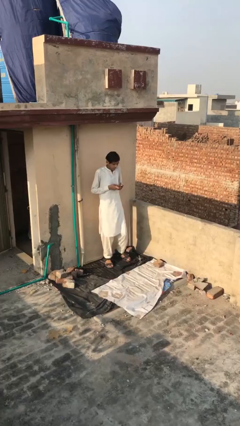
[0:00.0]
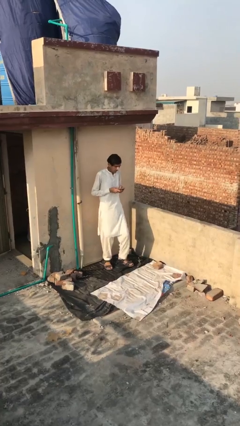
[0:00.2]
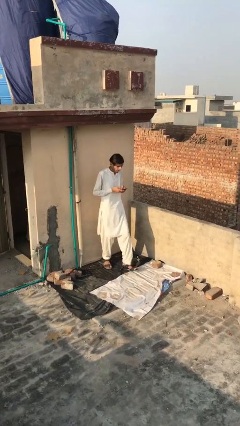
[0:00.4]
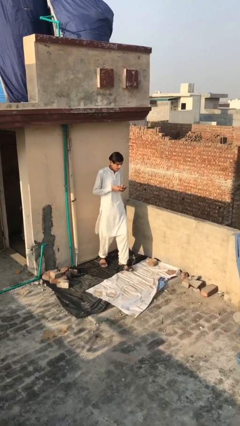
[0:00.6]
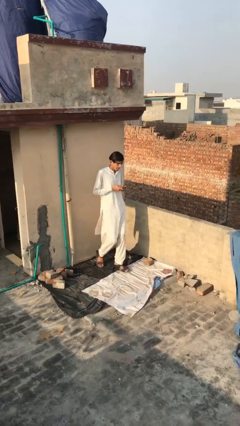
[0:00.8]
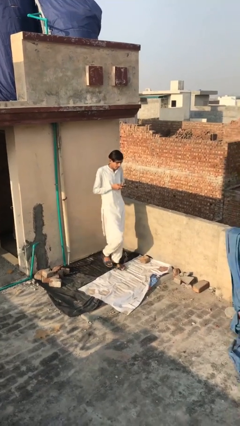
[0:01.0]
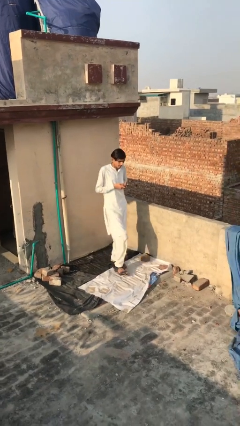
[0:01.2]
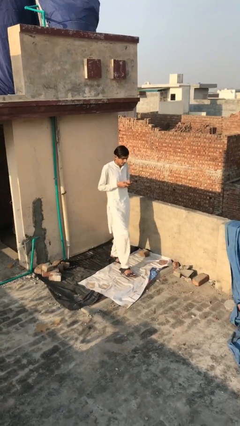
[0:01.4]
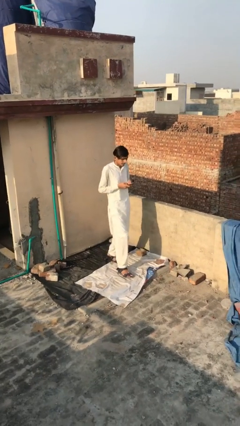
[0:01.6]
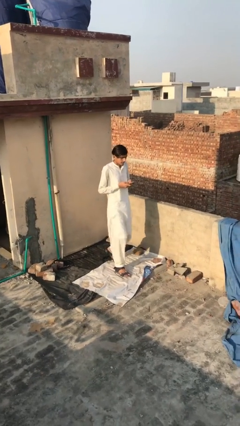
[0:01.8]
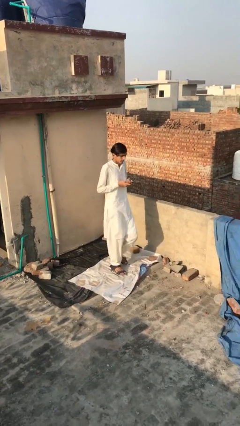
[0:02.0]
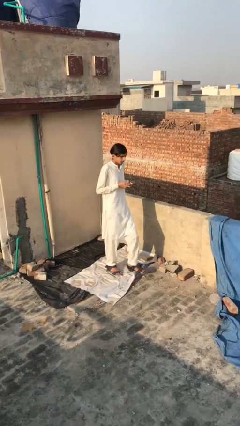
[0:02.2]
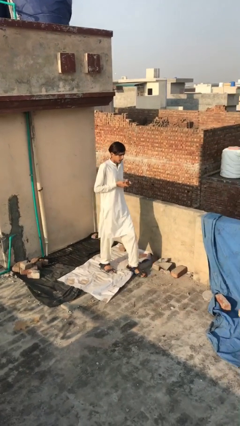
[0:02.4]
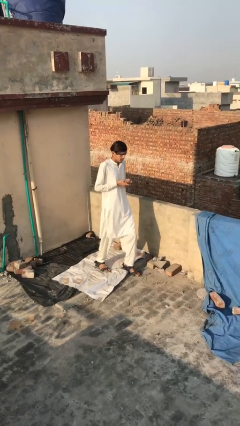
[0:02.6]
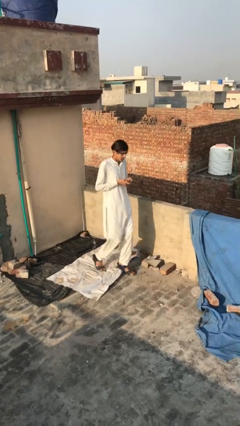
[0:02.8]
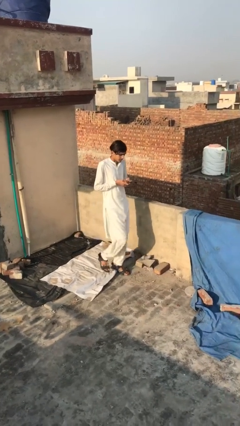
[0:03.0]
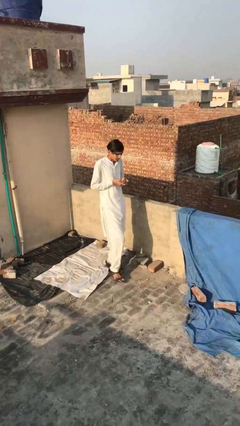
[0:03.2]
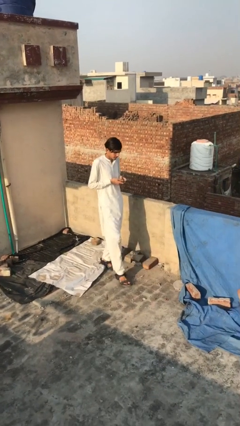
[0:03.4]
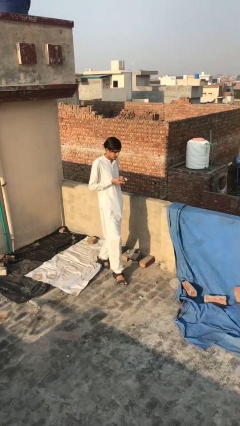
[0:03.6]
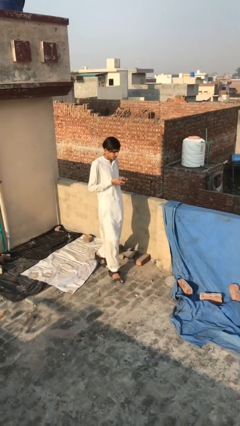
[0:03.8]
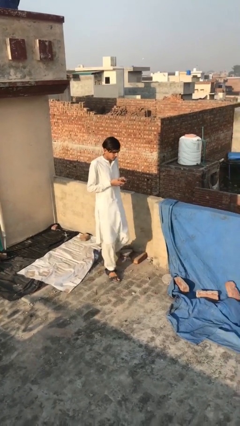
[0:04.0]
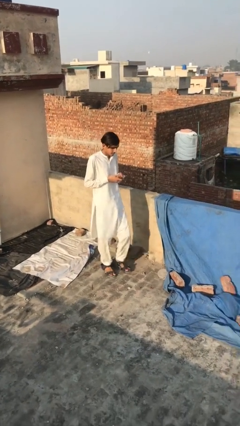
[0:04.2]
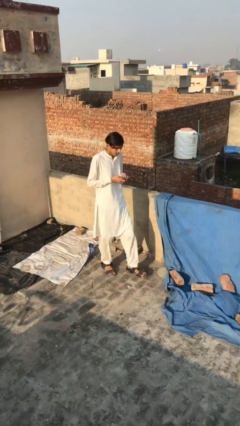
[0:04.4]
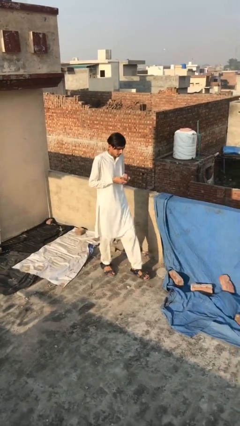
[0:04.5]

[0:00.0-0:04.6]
person texts on phone

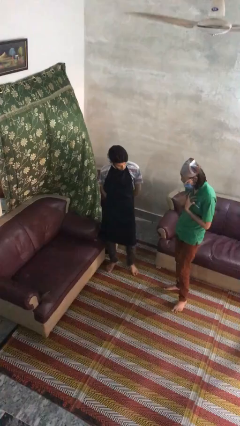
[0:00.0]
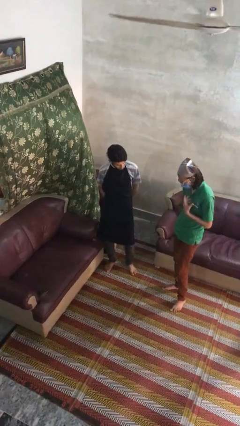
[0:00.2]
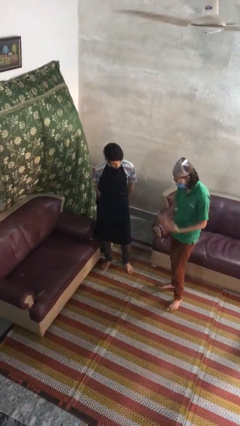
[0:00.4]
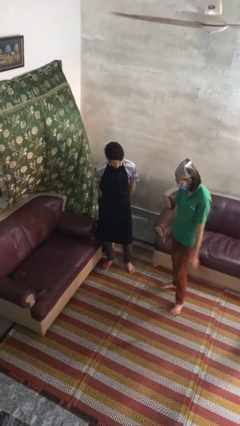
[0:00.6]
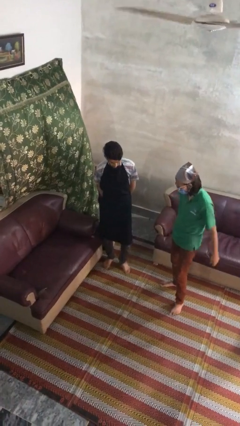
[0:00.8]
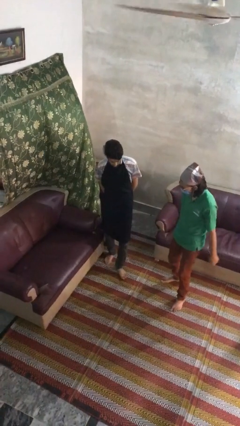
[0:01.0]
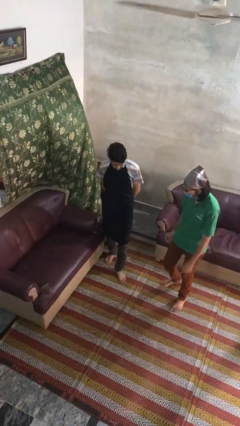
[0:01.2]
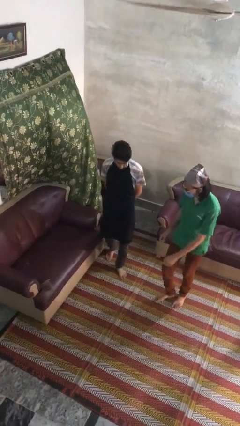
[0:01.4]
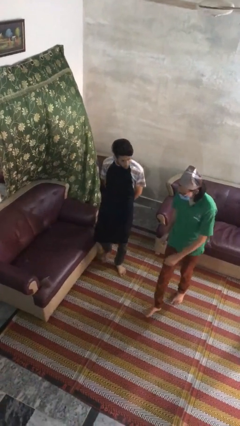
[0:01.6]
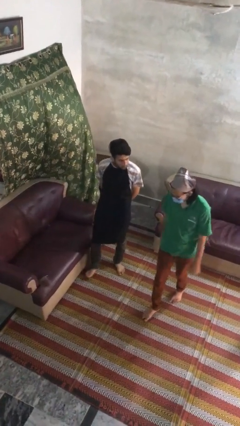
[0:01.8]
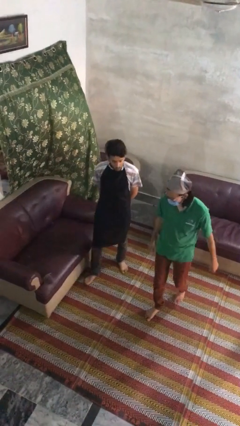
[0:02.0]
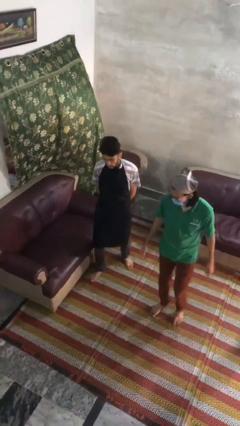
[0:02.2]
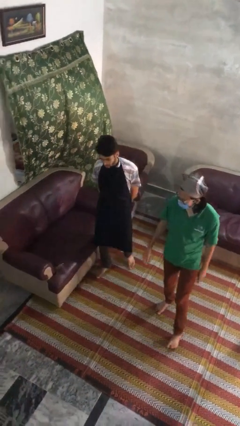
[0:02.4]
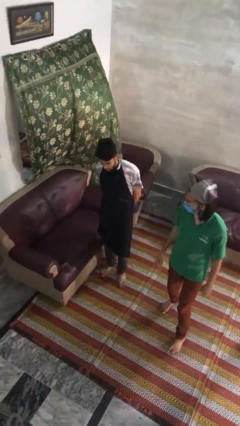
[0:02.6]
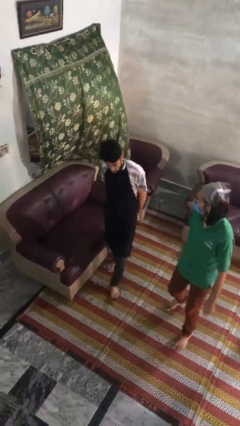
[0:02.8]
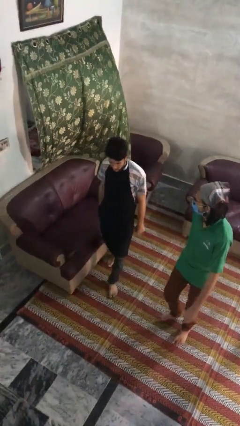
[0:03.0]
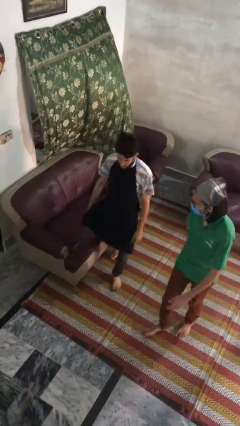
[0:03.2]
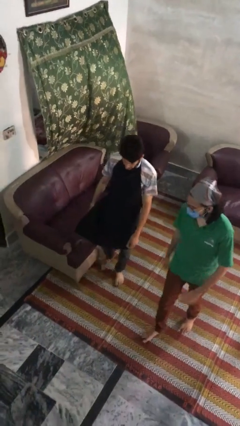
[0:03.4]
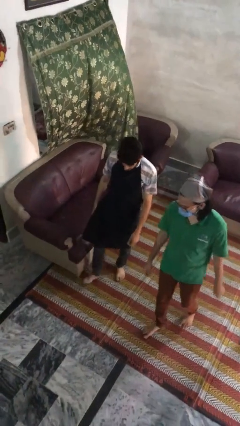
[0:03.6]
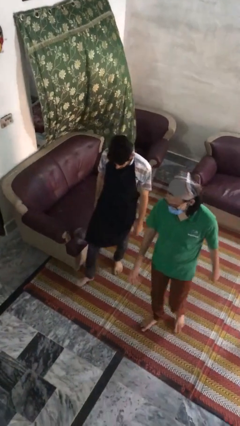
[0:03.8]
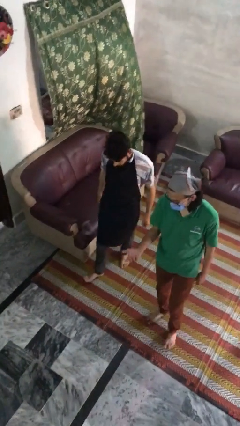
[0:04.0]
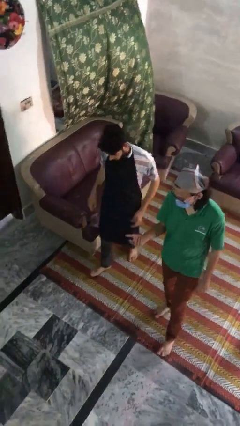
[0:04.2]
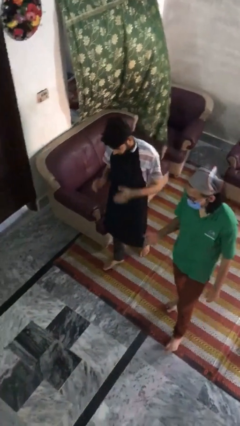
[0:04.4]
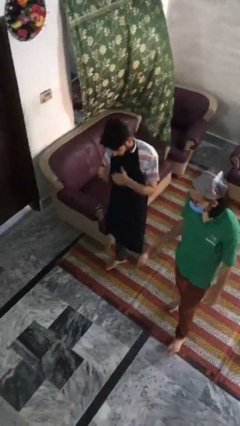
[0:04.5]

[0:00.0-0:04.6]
person talks to person

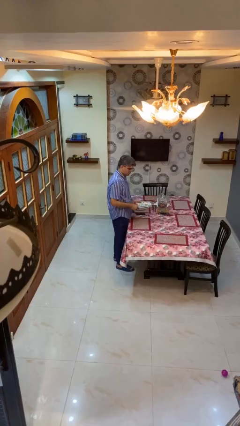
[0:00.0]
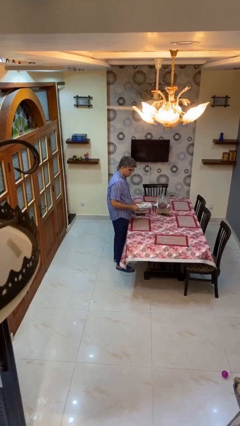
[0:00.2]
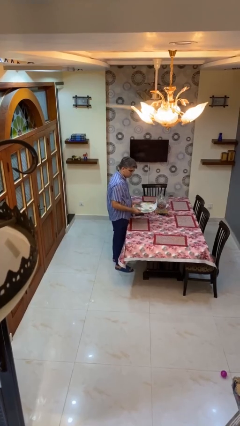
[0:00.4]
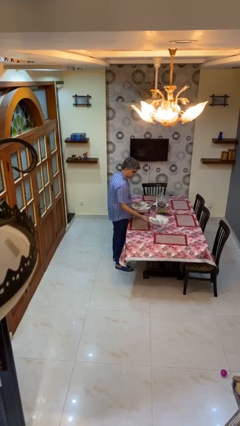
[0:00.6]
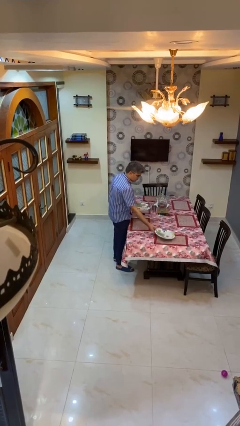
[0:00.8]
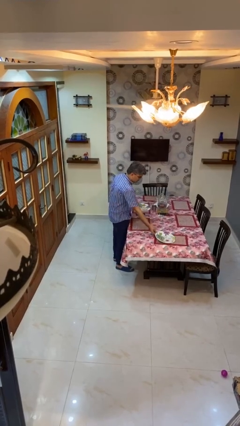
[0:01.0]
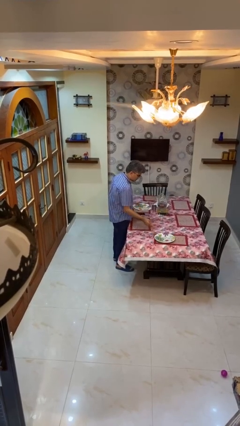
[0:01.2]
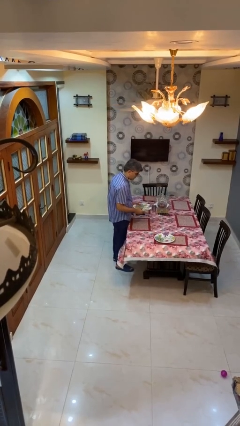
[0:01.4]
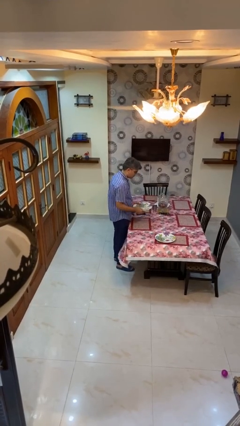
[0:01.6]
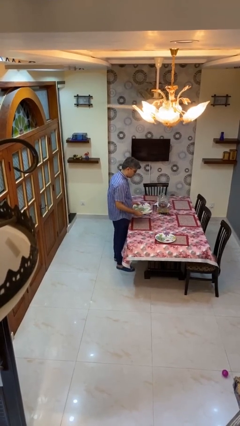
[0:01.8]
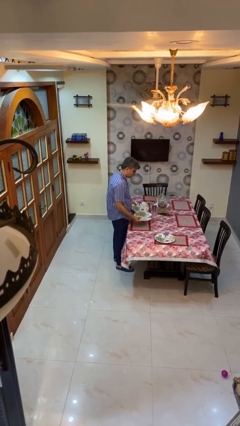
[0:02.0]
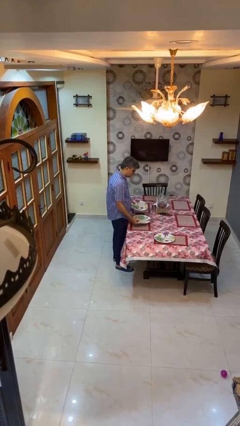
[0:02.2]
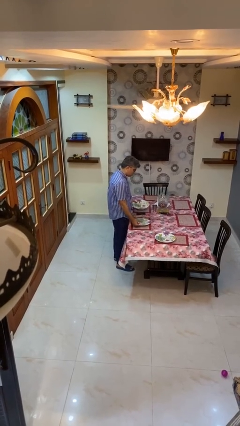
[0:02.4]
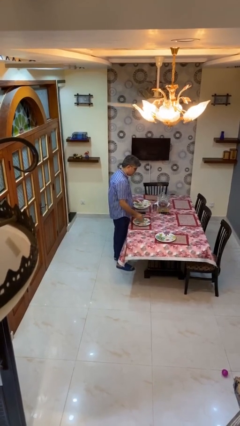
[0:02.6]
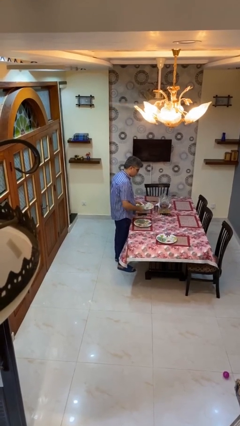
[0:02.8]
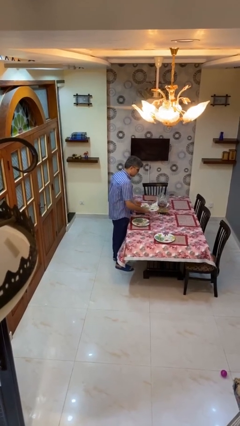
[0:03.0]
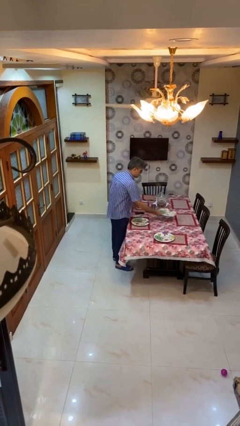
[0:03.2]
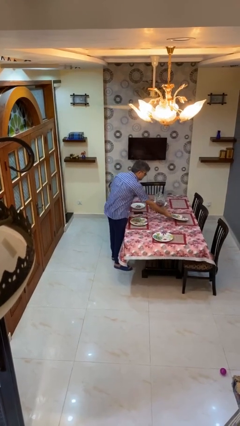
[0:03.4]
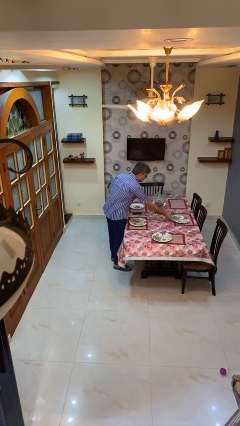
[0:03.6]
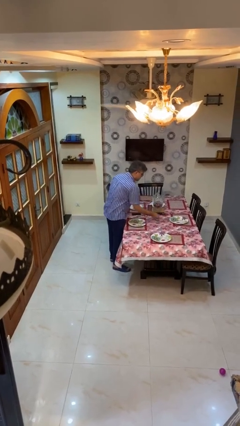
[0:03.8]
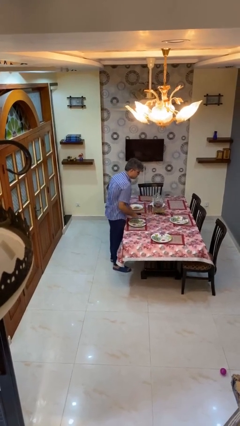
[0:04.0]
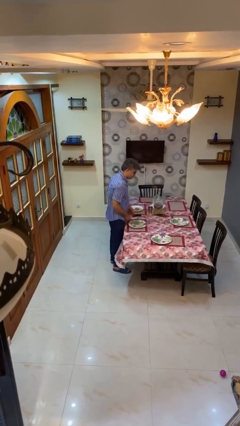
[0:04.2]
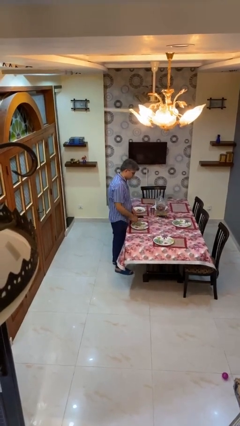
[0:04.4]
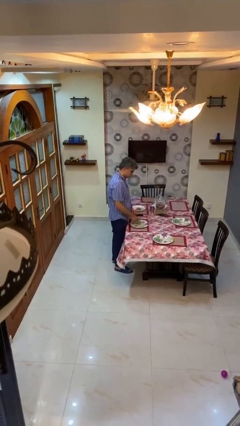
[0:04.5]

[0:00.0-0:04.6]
person sets table

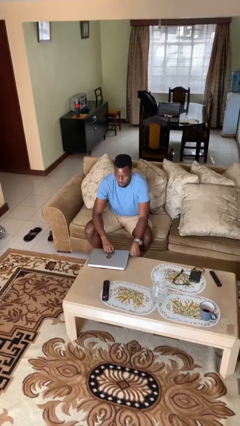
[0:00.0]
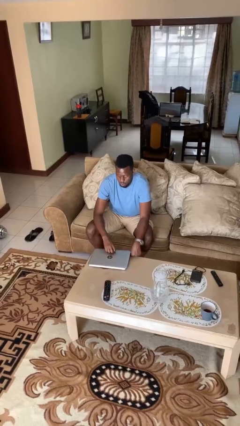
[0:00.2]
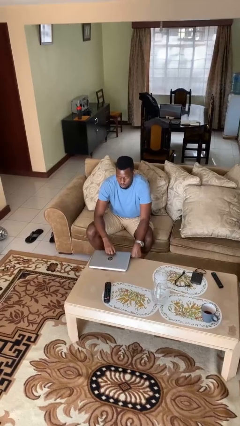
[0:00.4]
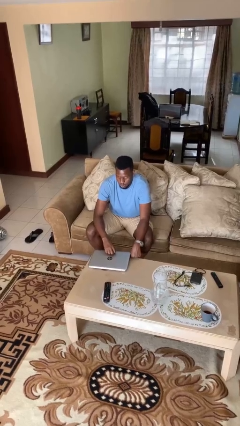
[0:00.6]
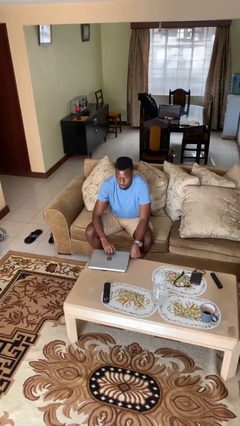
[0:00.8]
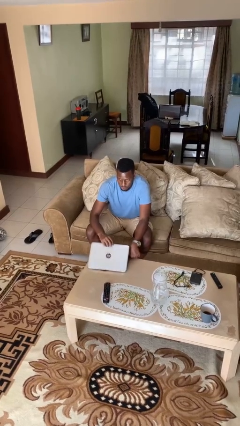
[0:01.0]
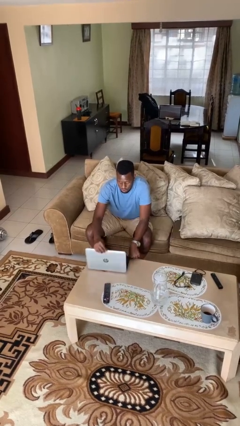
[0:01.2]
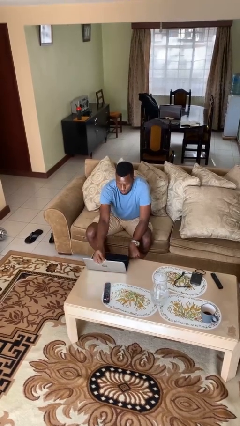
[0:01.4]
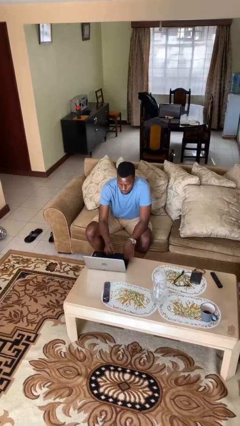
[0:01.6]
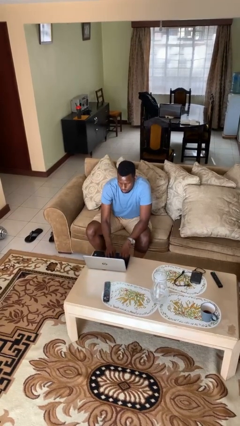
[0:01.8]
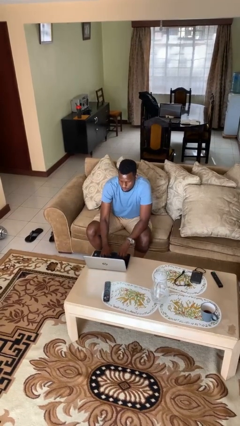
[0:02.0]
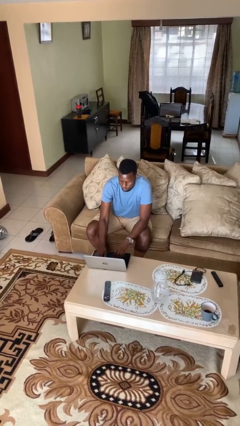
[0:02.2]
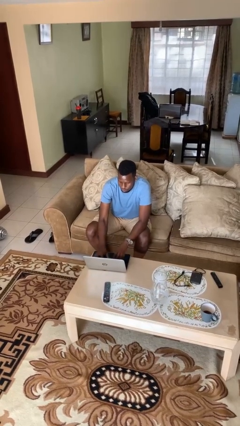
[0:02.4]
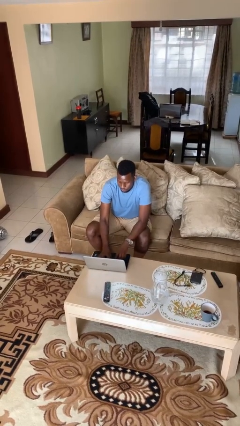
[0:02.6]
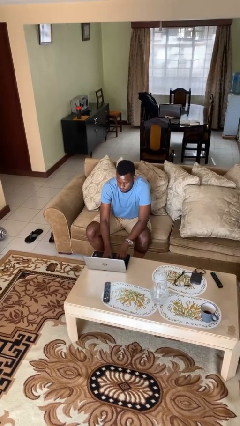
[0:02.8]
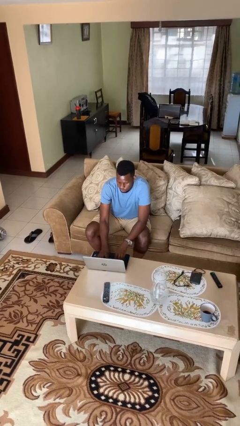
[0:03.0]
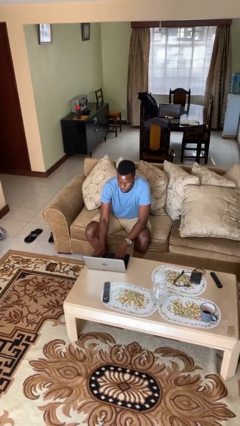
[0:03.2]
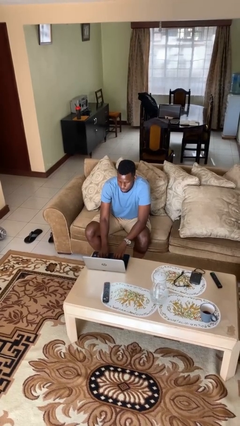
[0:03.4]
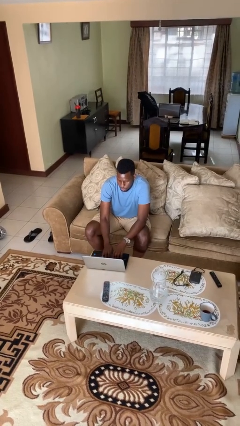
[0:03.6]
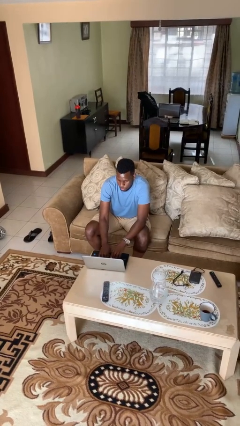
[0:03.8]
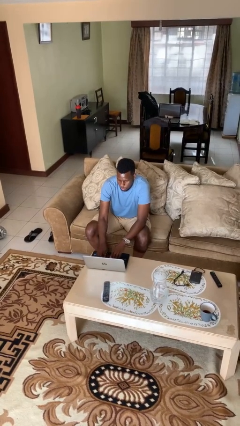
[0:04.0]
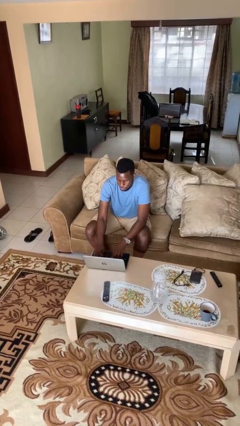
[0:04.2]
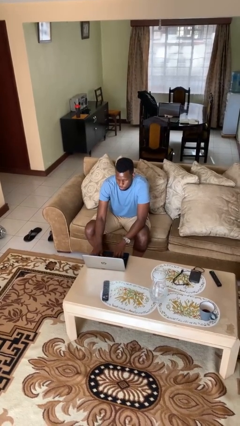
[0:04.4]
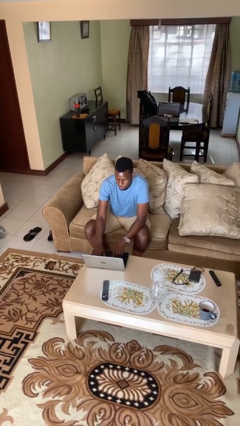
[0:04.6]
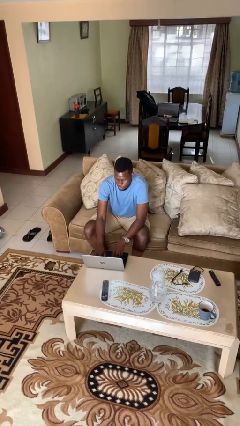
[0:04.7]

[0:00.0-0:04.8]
person interacts with laptop
